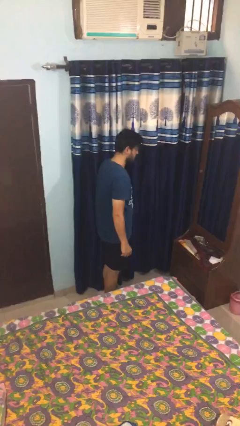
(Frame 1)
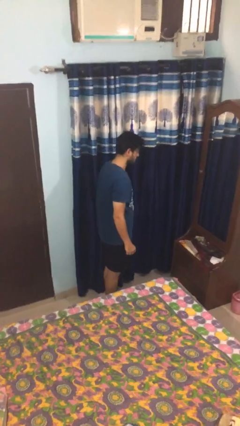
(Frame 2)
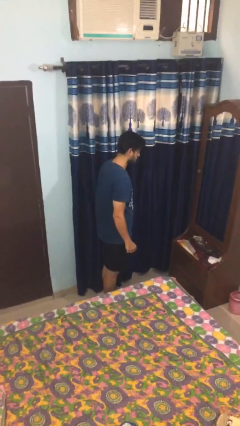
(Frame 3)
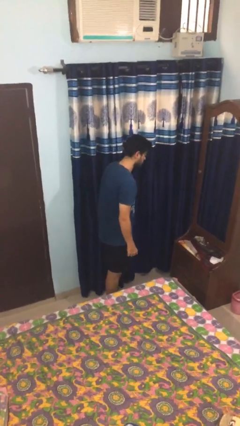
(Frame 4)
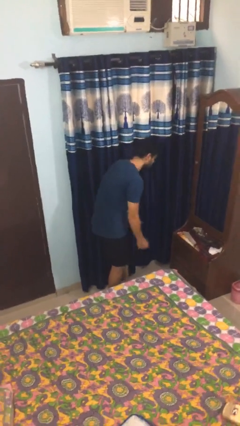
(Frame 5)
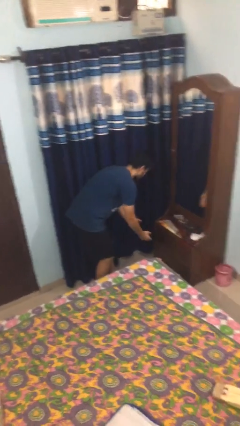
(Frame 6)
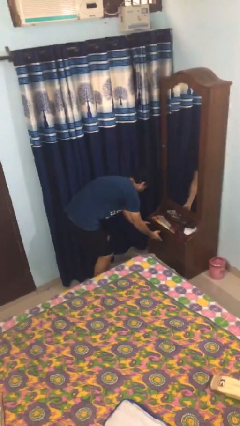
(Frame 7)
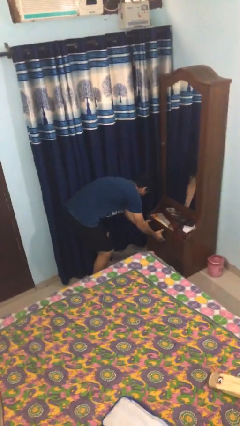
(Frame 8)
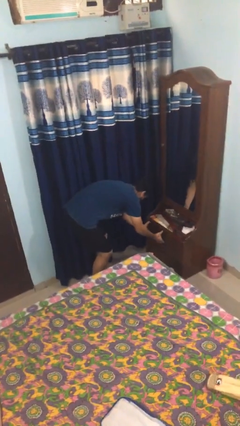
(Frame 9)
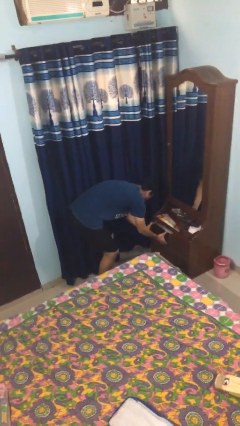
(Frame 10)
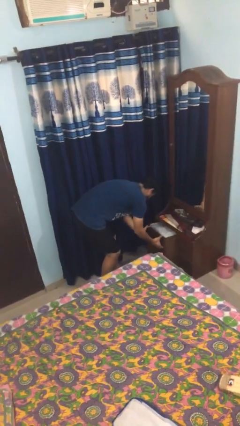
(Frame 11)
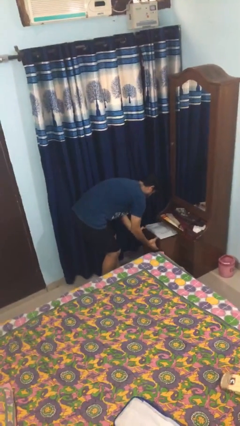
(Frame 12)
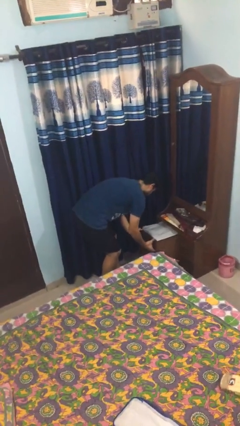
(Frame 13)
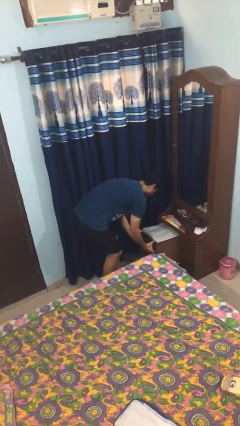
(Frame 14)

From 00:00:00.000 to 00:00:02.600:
person opens dresser drawer

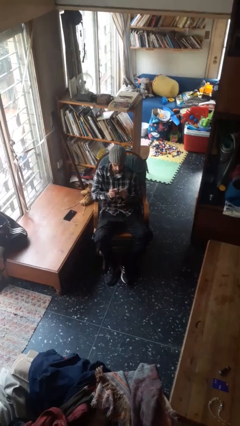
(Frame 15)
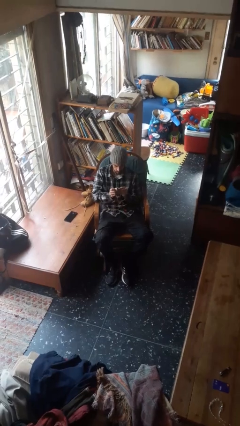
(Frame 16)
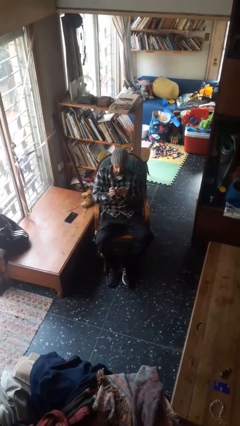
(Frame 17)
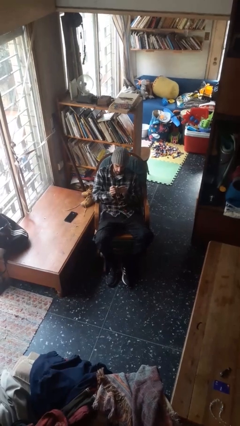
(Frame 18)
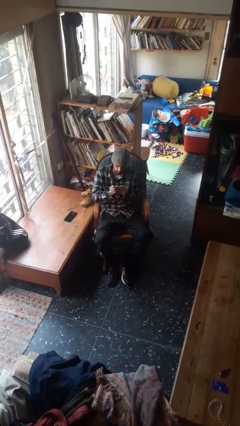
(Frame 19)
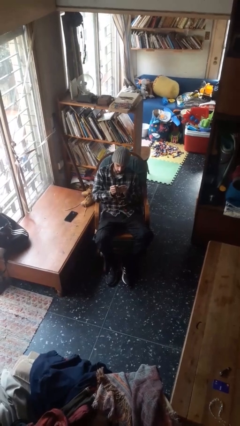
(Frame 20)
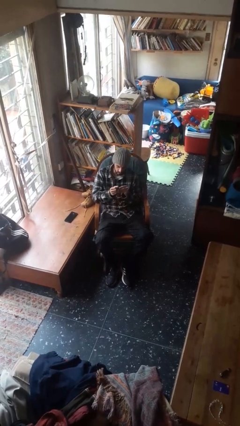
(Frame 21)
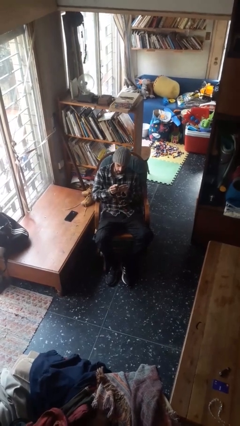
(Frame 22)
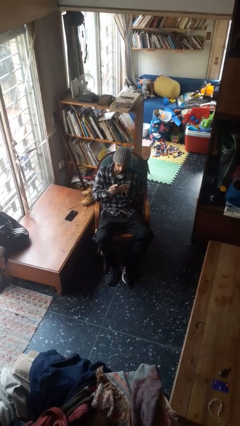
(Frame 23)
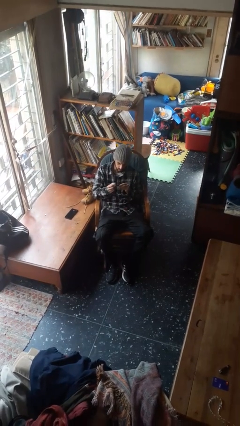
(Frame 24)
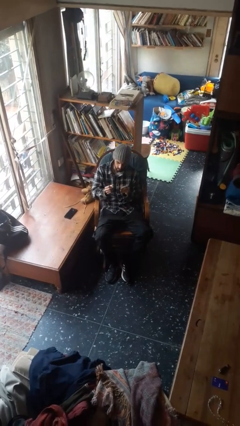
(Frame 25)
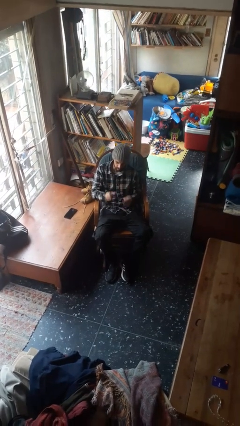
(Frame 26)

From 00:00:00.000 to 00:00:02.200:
person files fingernails

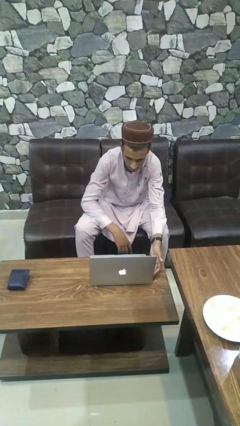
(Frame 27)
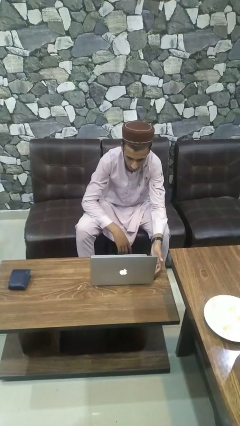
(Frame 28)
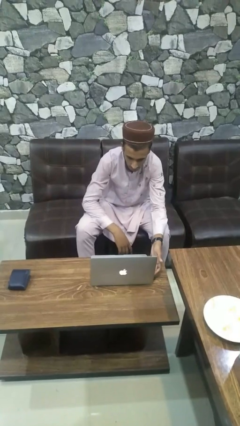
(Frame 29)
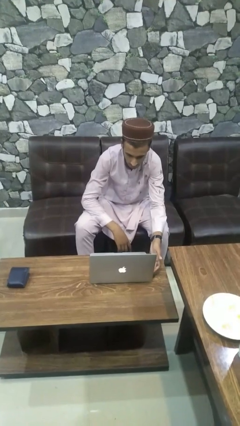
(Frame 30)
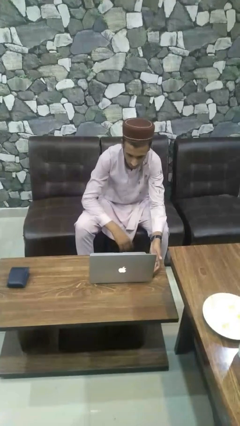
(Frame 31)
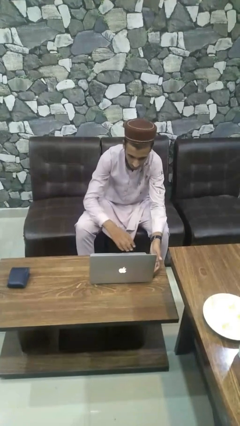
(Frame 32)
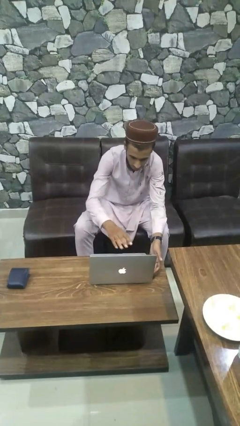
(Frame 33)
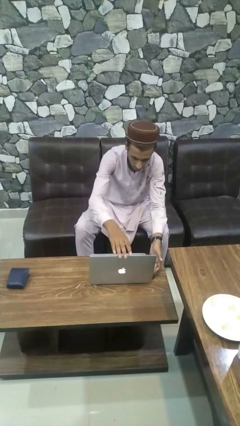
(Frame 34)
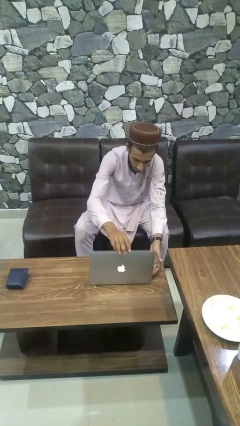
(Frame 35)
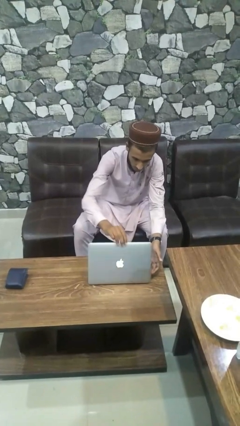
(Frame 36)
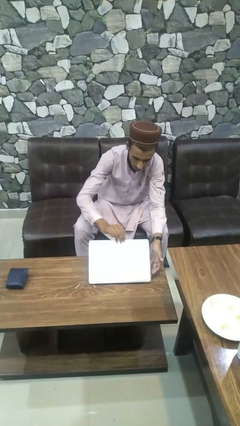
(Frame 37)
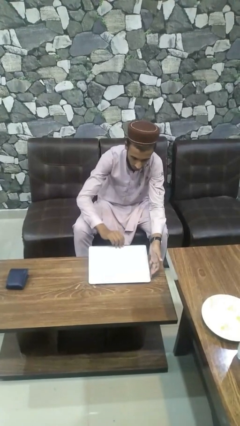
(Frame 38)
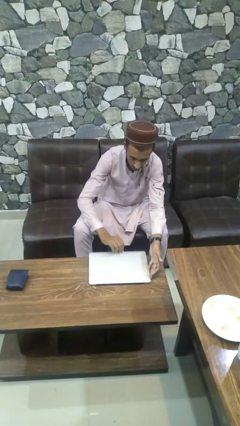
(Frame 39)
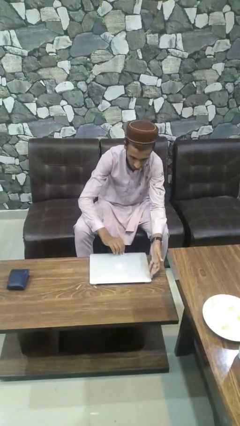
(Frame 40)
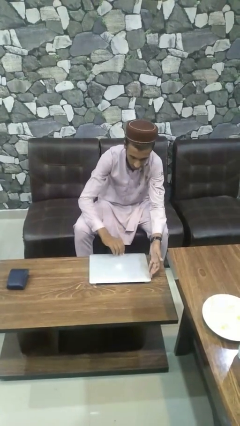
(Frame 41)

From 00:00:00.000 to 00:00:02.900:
person closes laptop

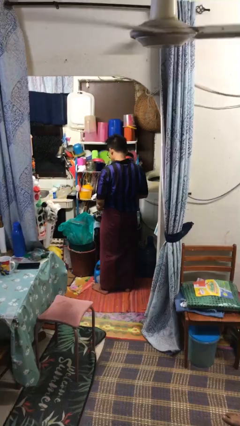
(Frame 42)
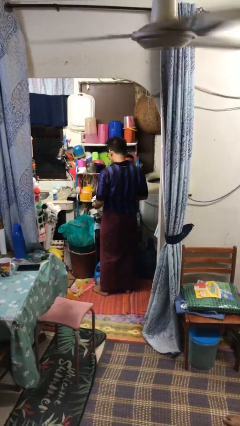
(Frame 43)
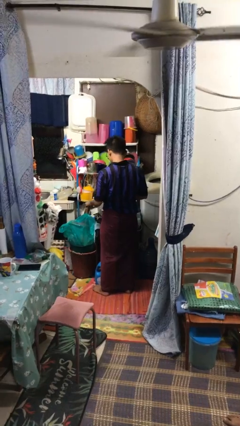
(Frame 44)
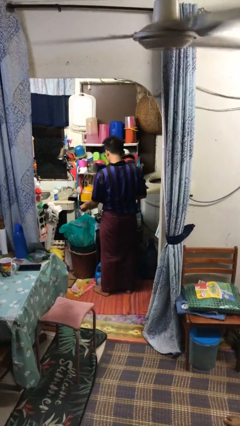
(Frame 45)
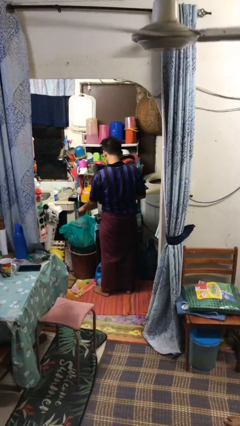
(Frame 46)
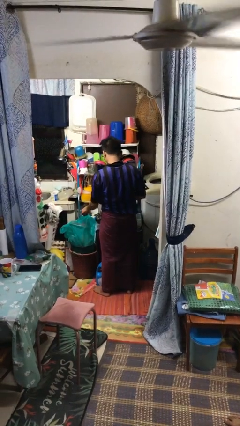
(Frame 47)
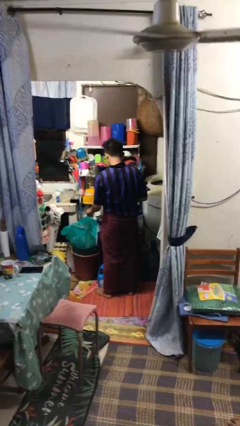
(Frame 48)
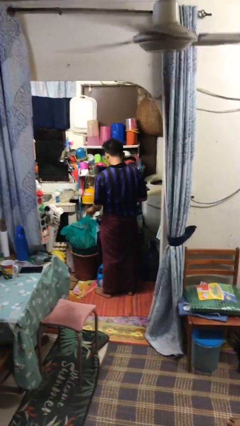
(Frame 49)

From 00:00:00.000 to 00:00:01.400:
person discards trash

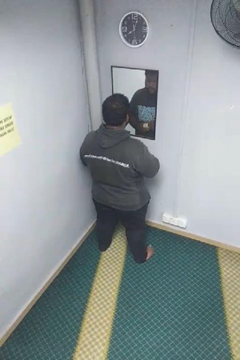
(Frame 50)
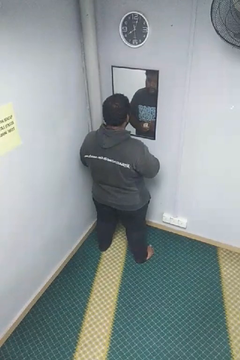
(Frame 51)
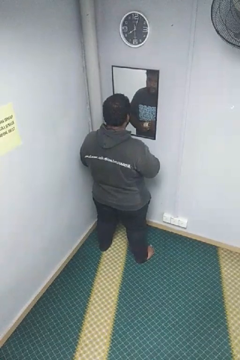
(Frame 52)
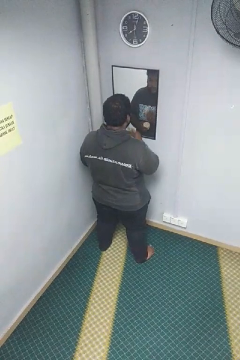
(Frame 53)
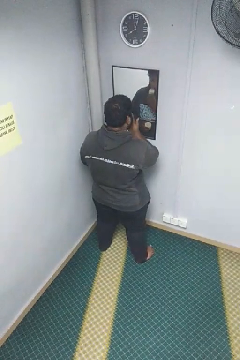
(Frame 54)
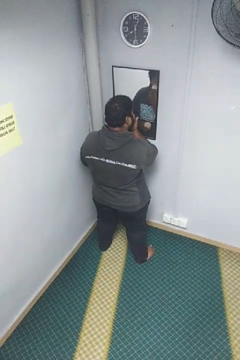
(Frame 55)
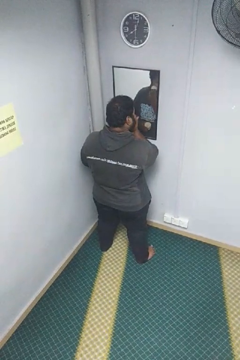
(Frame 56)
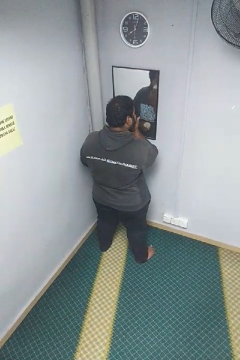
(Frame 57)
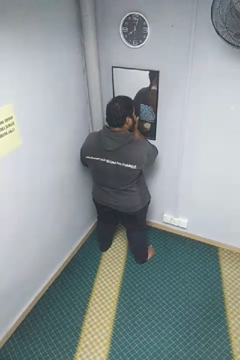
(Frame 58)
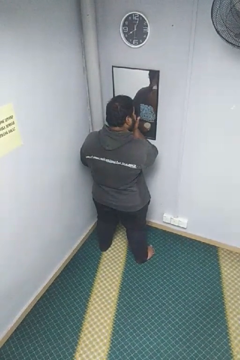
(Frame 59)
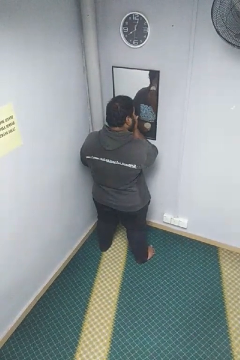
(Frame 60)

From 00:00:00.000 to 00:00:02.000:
person applies foundation makeup

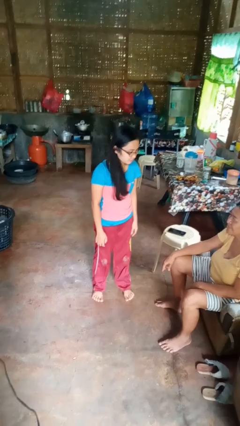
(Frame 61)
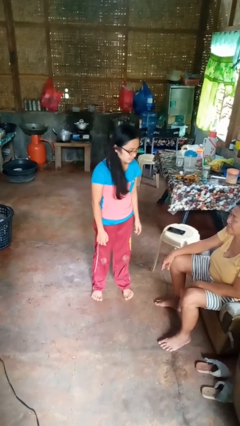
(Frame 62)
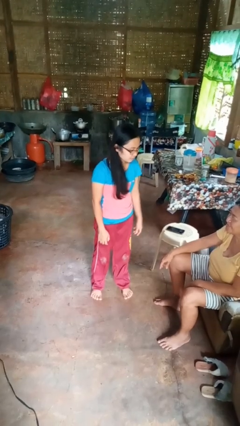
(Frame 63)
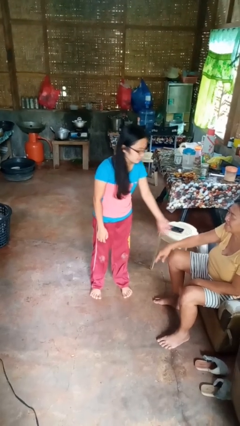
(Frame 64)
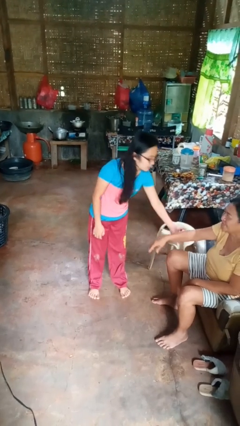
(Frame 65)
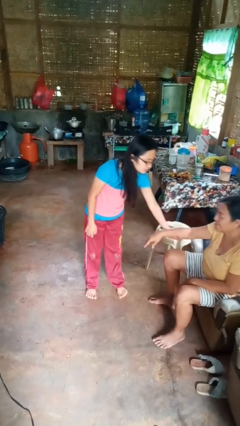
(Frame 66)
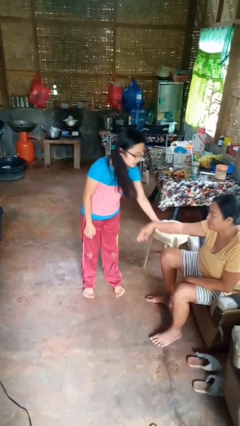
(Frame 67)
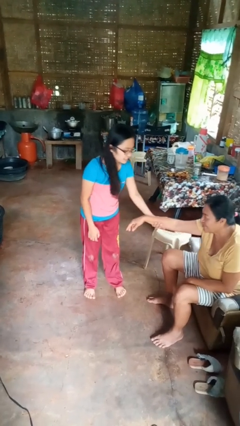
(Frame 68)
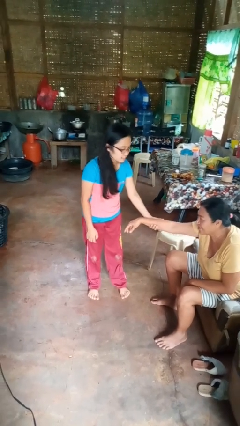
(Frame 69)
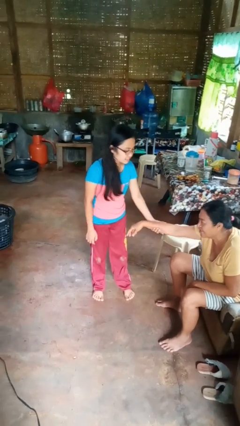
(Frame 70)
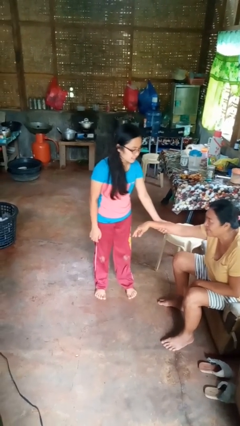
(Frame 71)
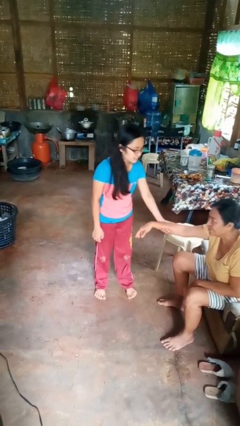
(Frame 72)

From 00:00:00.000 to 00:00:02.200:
person grabs person by forearm

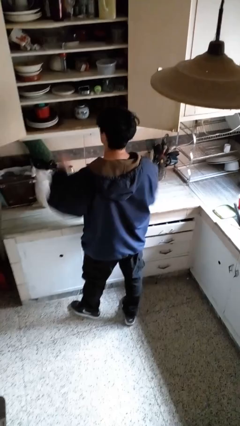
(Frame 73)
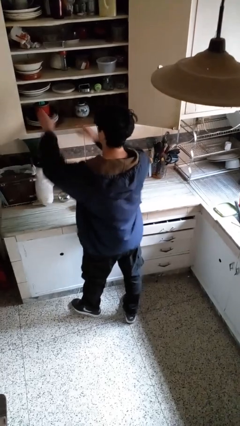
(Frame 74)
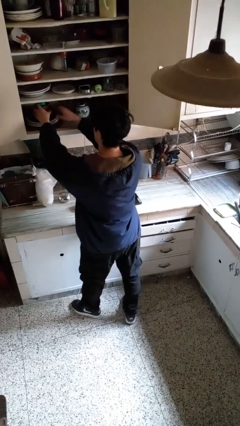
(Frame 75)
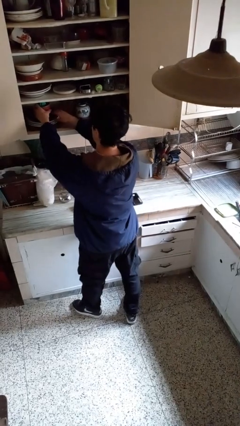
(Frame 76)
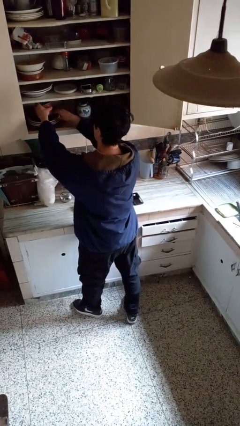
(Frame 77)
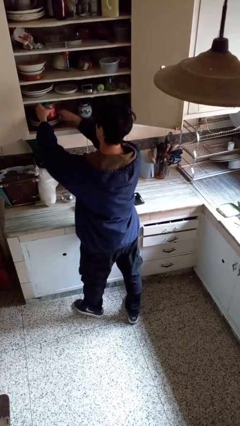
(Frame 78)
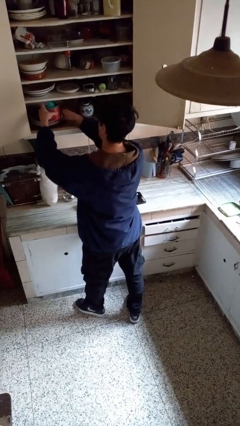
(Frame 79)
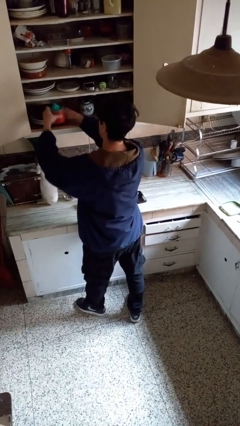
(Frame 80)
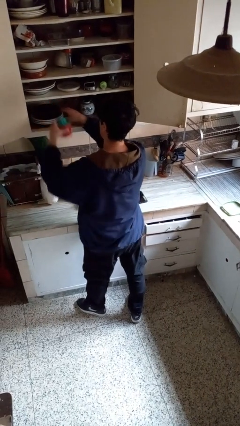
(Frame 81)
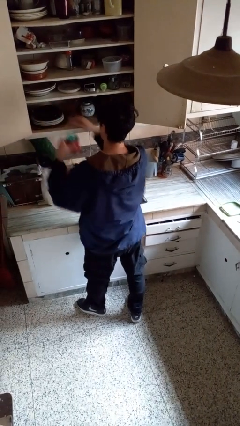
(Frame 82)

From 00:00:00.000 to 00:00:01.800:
person takes object from cabinet

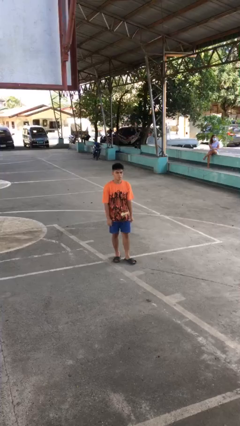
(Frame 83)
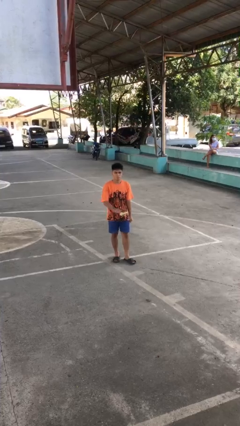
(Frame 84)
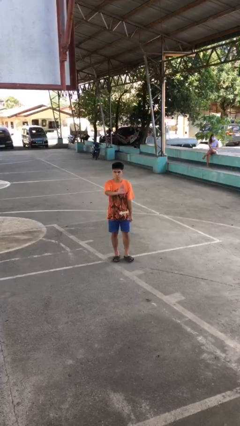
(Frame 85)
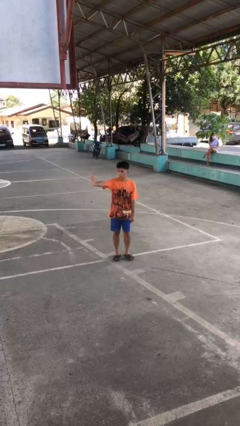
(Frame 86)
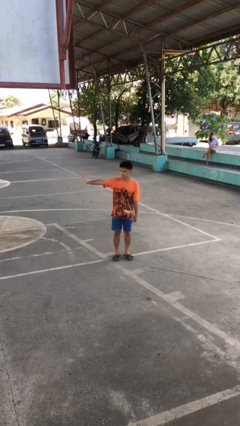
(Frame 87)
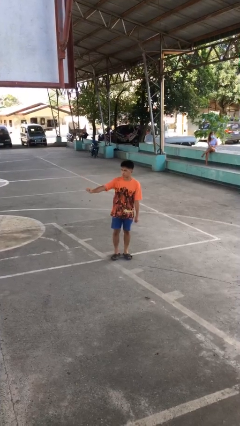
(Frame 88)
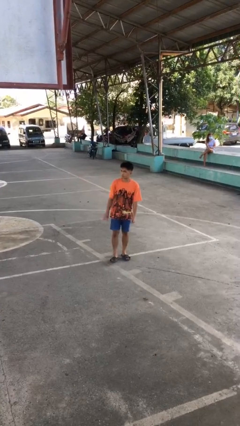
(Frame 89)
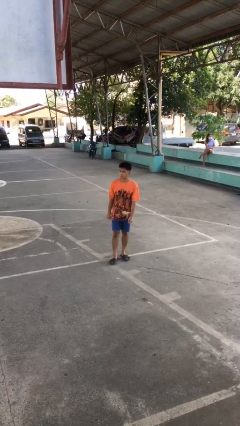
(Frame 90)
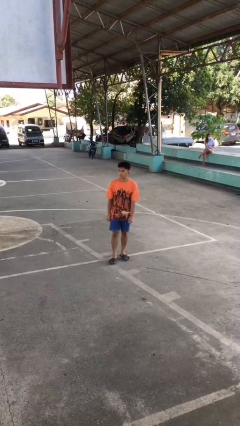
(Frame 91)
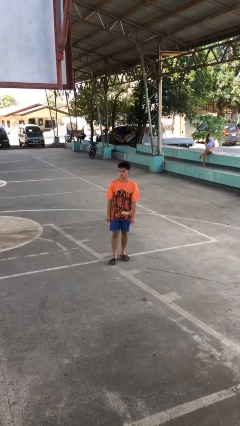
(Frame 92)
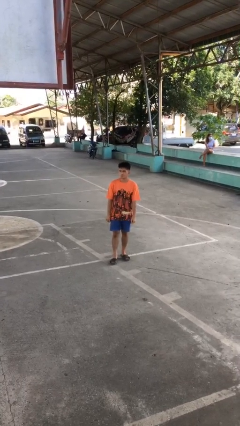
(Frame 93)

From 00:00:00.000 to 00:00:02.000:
person gestures swipe right

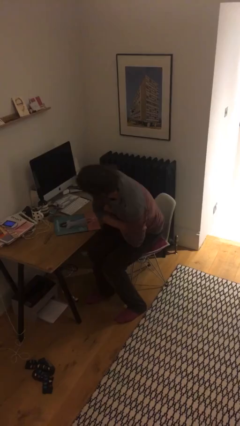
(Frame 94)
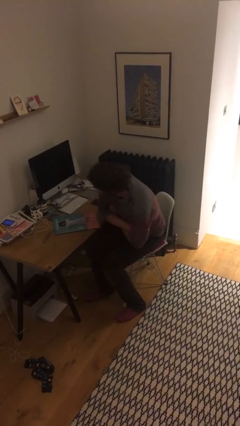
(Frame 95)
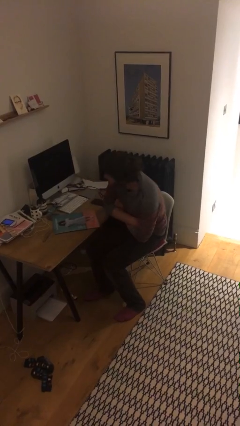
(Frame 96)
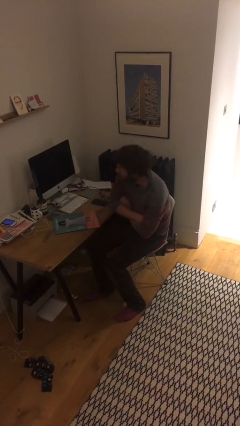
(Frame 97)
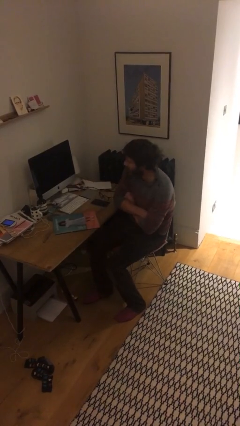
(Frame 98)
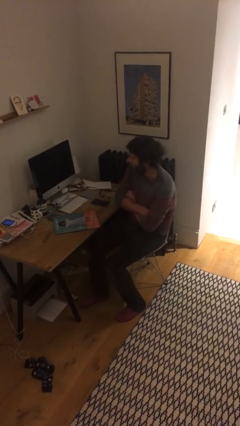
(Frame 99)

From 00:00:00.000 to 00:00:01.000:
person sits down
